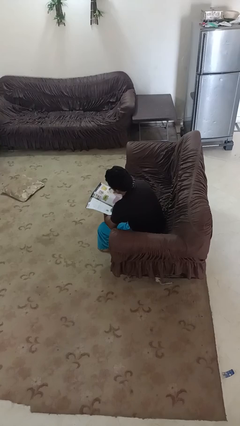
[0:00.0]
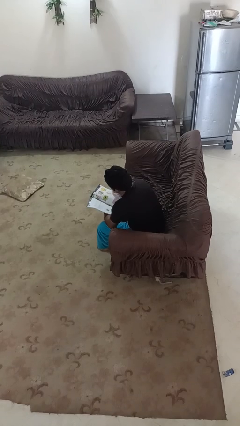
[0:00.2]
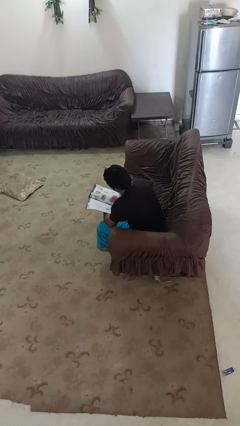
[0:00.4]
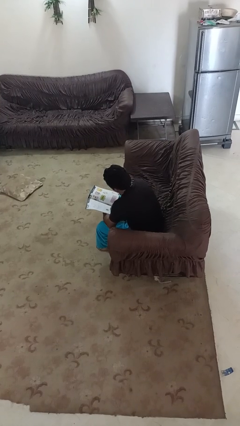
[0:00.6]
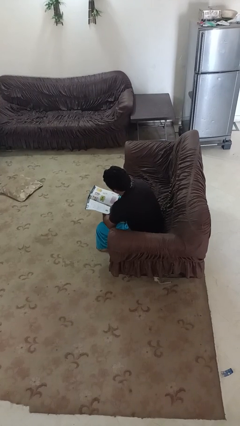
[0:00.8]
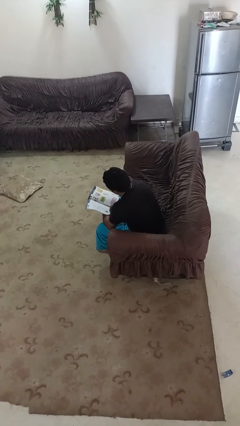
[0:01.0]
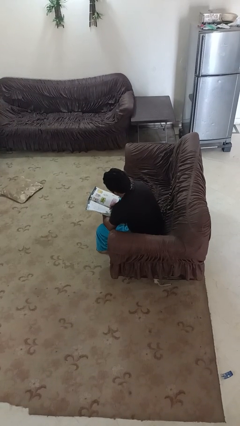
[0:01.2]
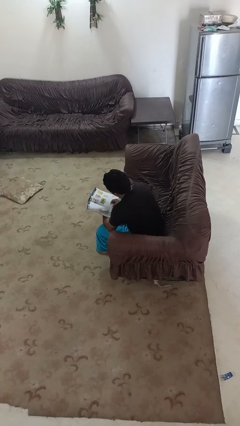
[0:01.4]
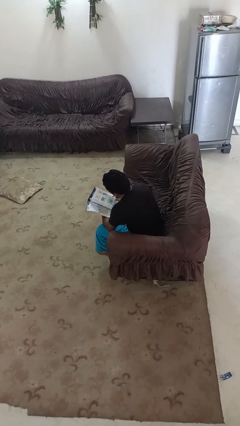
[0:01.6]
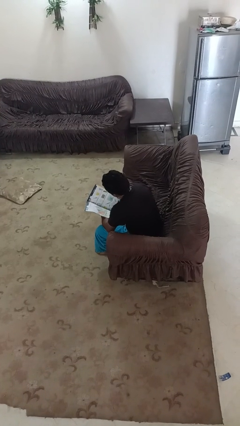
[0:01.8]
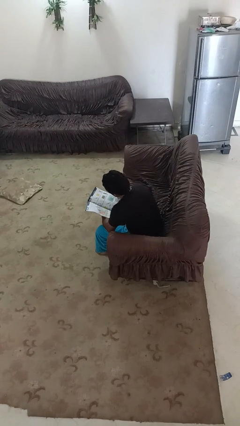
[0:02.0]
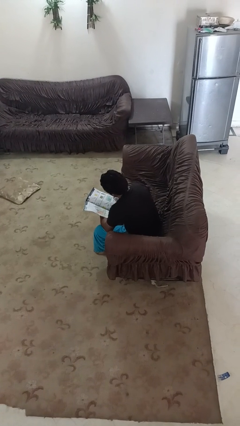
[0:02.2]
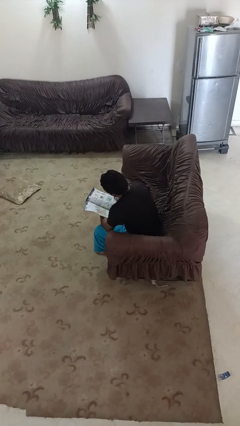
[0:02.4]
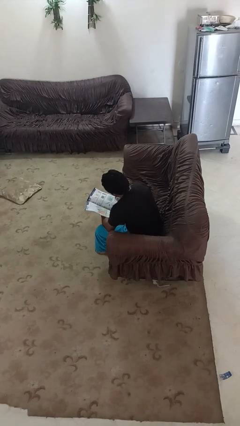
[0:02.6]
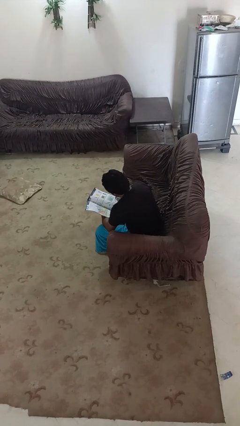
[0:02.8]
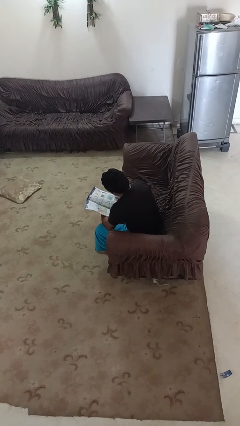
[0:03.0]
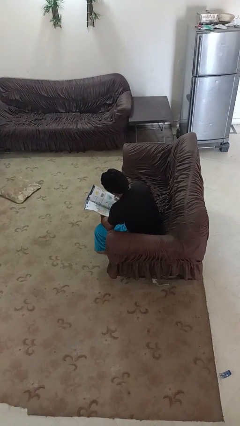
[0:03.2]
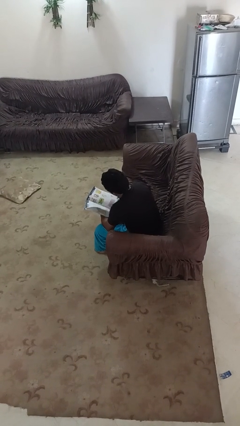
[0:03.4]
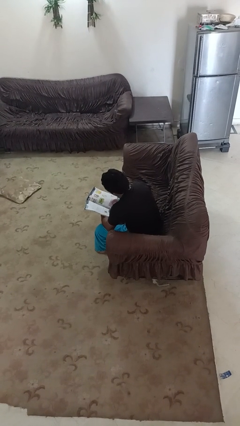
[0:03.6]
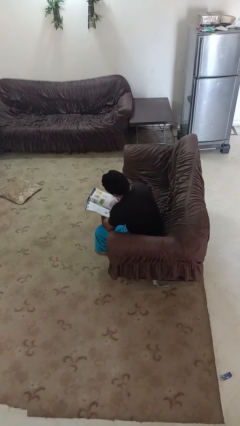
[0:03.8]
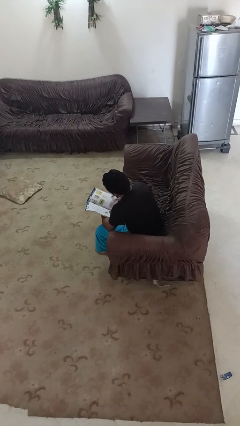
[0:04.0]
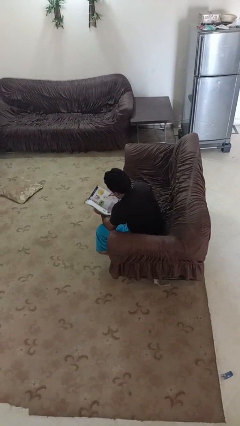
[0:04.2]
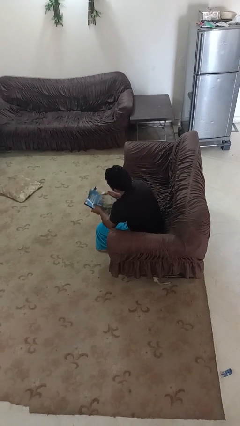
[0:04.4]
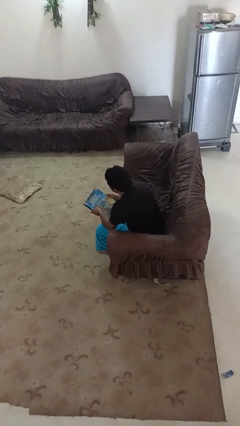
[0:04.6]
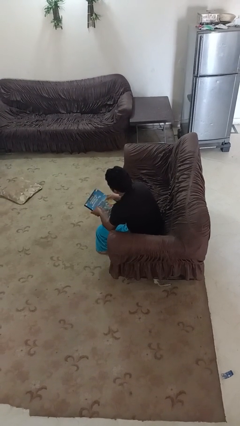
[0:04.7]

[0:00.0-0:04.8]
person reads book

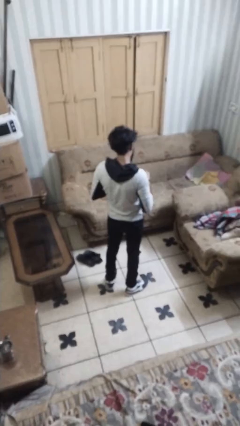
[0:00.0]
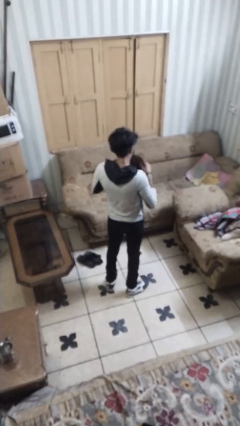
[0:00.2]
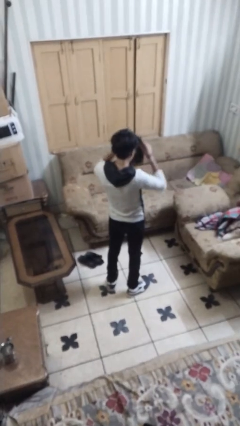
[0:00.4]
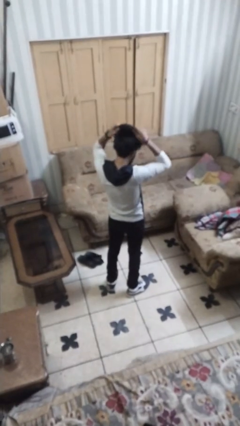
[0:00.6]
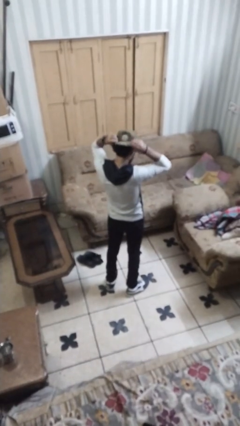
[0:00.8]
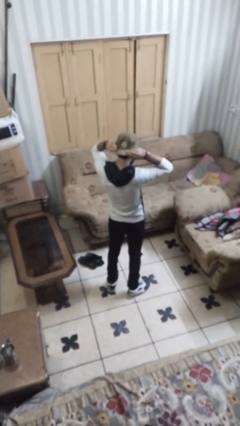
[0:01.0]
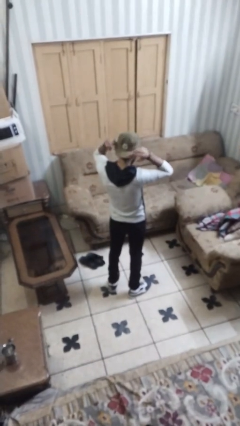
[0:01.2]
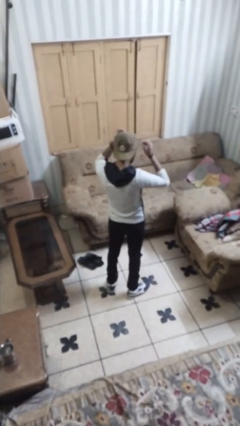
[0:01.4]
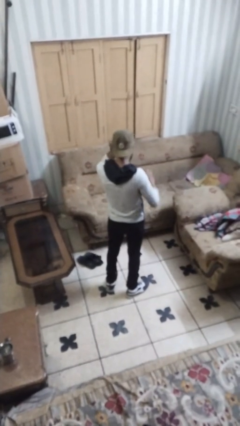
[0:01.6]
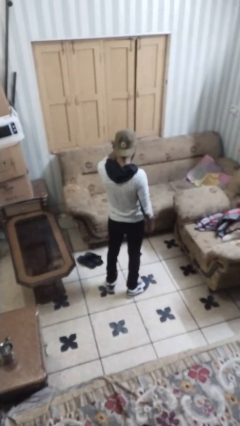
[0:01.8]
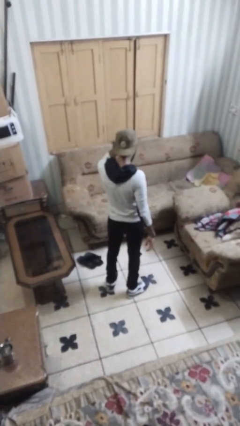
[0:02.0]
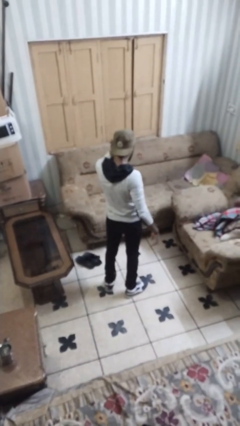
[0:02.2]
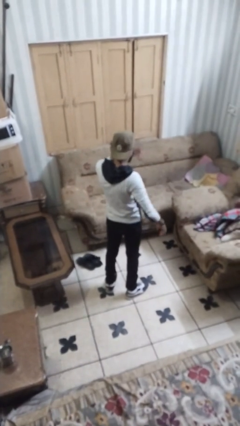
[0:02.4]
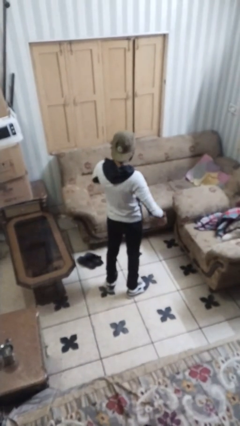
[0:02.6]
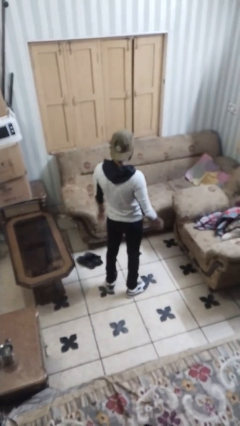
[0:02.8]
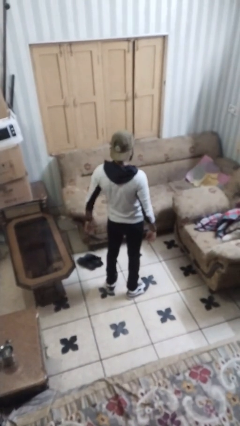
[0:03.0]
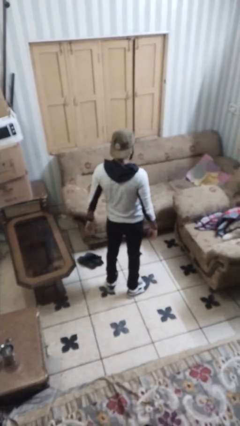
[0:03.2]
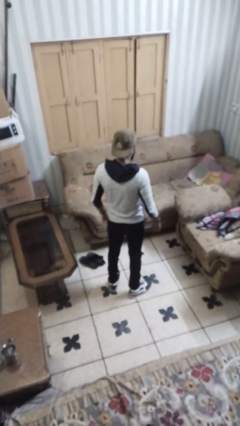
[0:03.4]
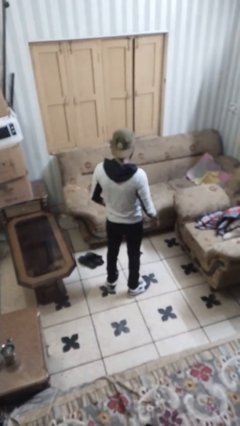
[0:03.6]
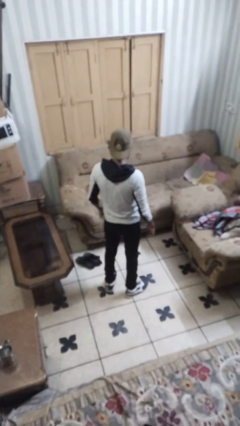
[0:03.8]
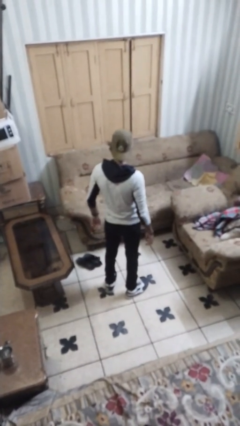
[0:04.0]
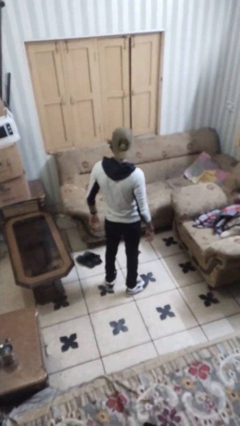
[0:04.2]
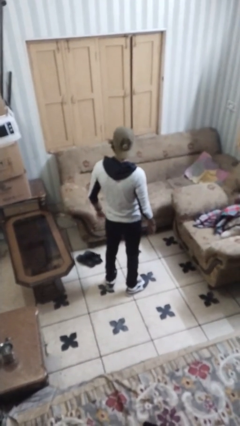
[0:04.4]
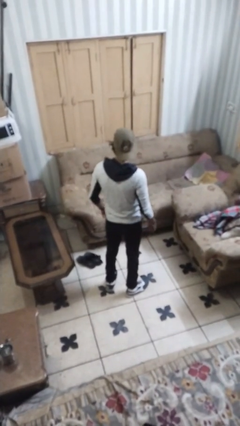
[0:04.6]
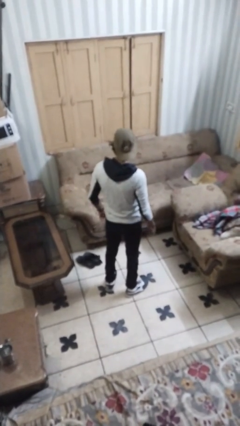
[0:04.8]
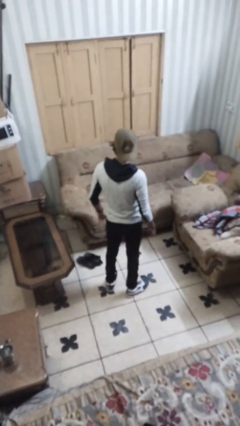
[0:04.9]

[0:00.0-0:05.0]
person puts on hat

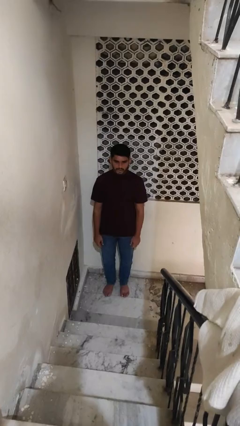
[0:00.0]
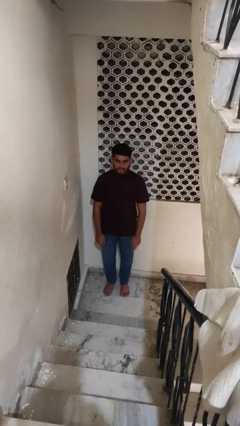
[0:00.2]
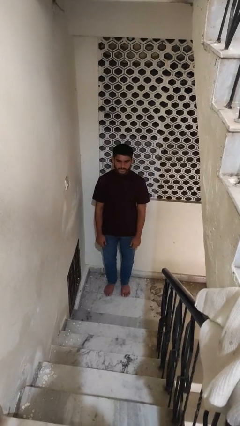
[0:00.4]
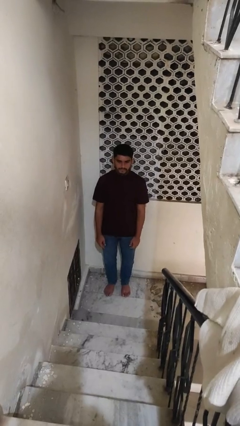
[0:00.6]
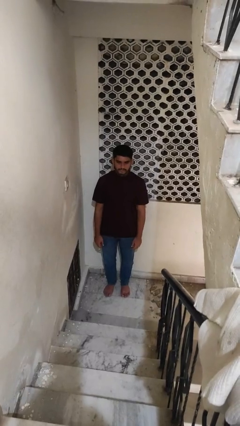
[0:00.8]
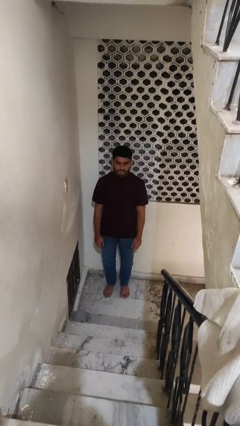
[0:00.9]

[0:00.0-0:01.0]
person crosses arms

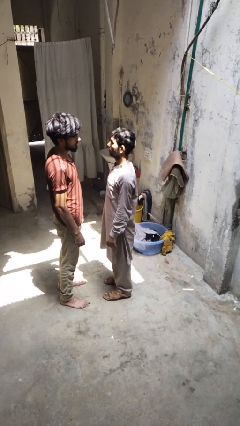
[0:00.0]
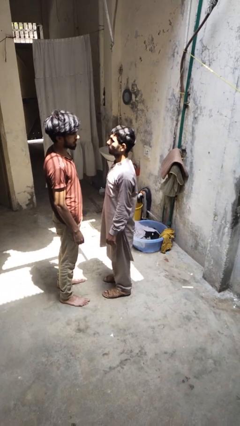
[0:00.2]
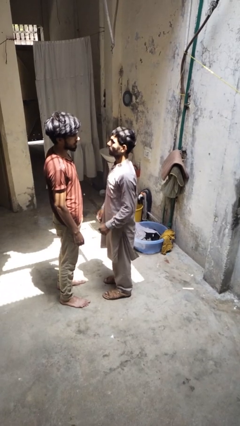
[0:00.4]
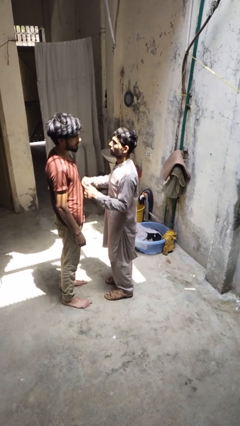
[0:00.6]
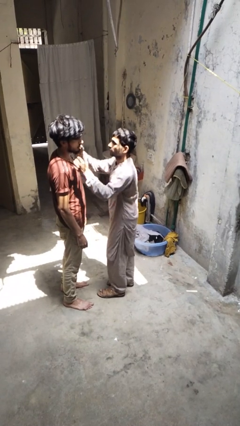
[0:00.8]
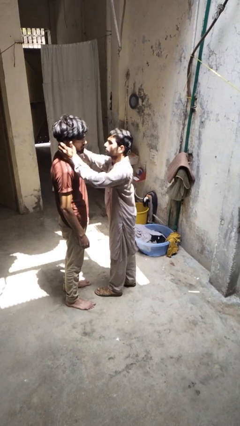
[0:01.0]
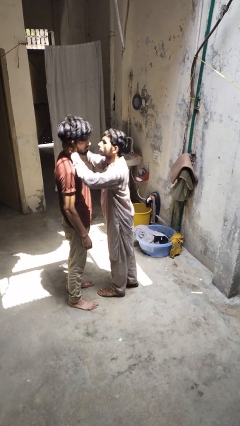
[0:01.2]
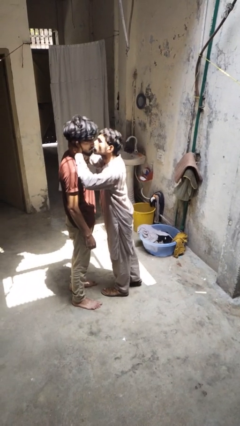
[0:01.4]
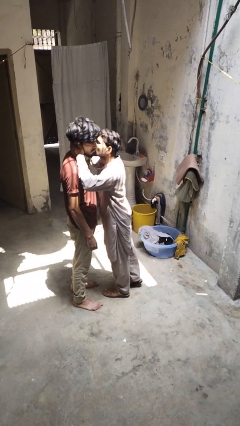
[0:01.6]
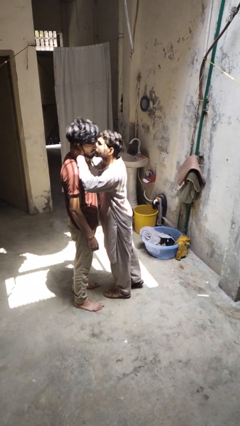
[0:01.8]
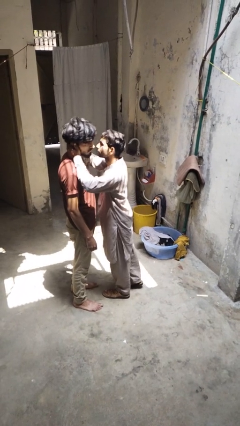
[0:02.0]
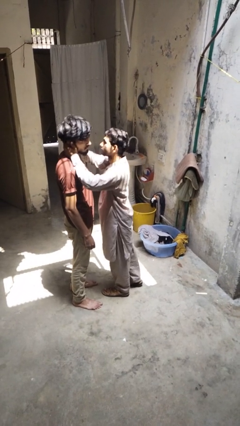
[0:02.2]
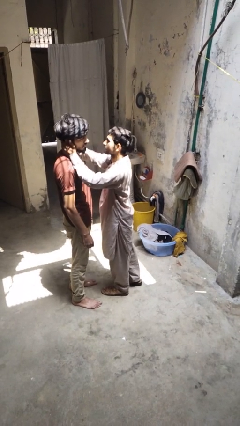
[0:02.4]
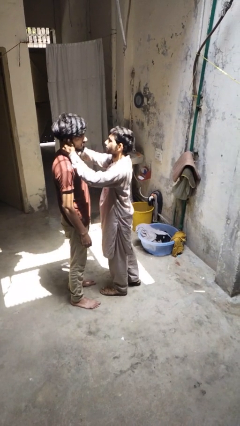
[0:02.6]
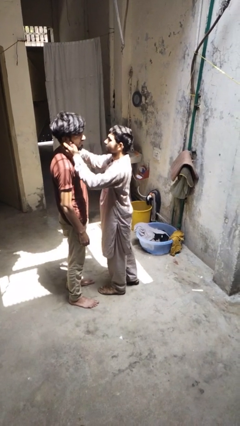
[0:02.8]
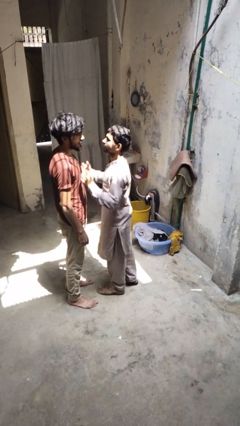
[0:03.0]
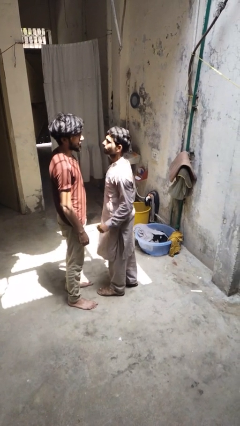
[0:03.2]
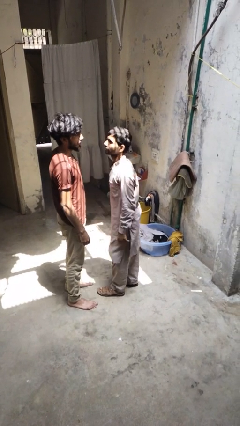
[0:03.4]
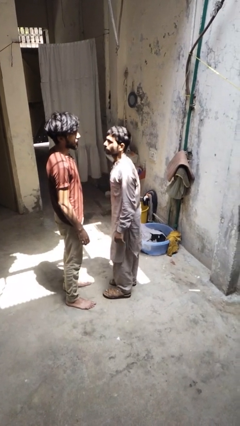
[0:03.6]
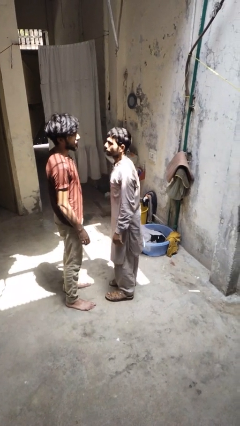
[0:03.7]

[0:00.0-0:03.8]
person kisses cheek of person

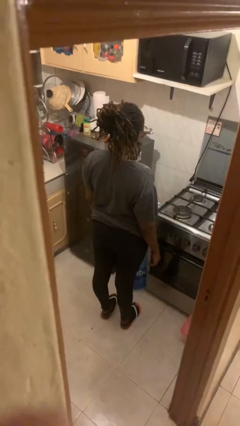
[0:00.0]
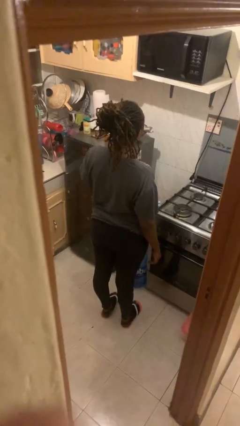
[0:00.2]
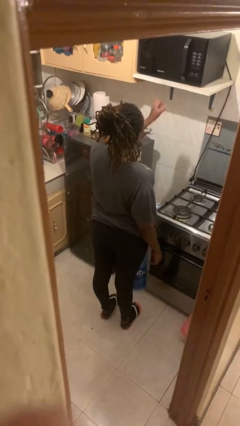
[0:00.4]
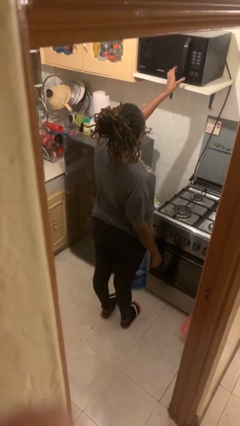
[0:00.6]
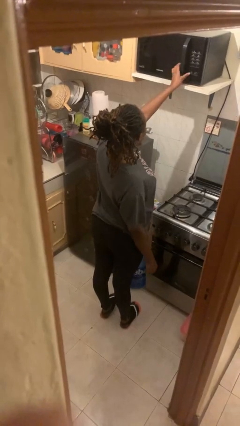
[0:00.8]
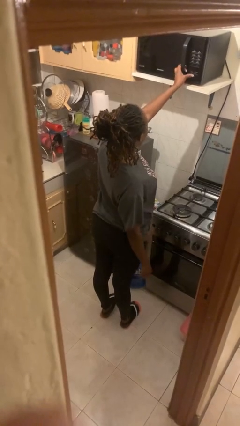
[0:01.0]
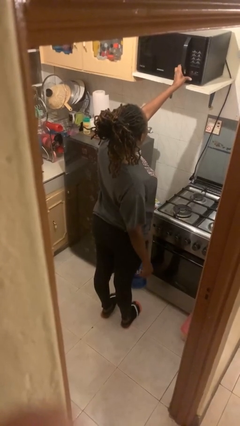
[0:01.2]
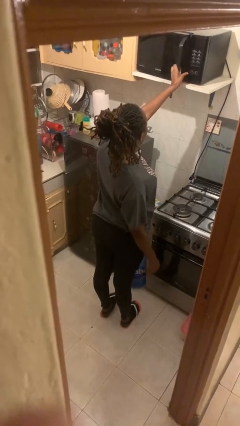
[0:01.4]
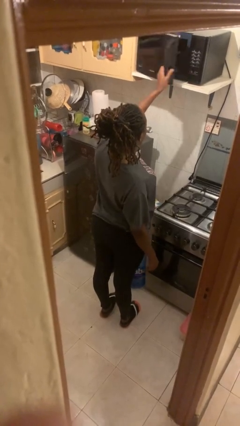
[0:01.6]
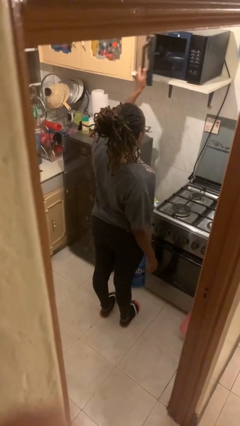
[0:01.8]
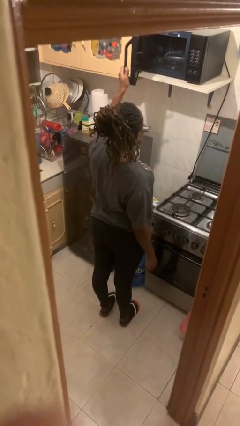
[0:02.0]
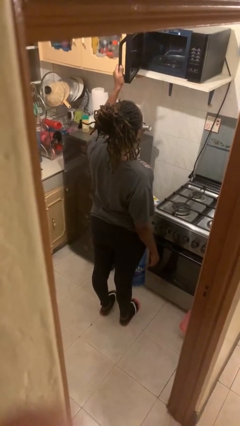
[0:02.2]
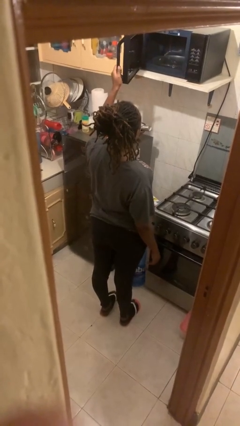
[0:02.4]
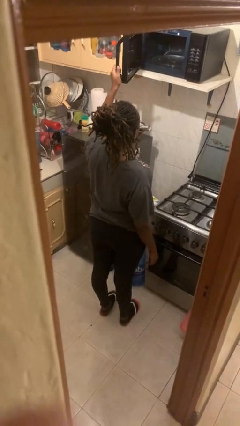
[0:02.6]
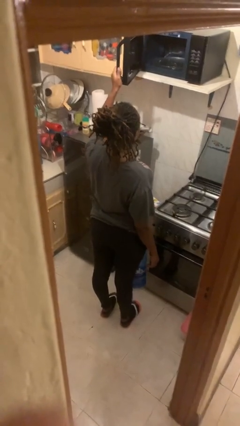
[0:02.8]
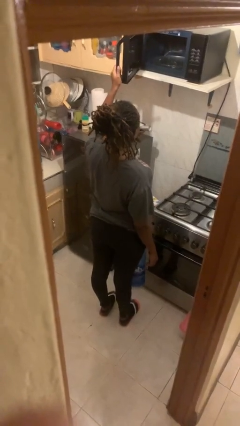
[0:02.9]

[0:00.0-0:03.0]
person opens microwave

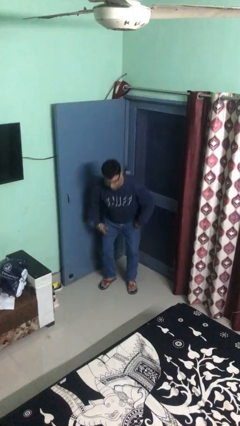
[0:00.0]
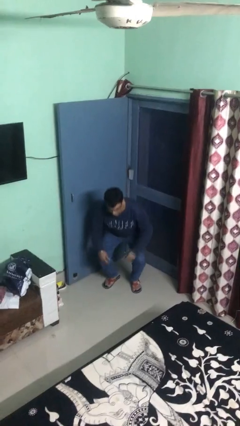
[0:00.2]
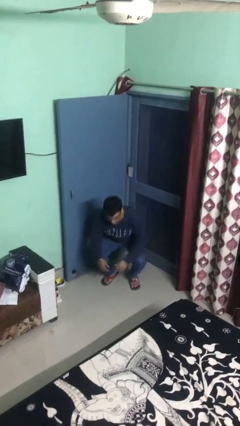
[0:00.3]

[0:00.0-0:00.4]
person sits down
